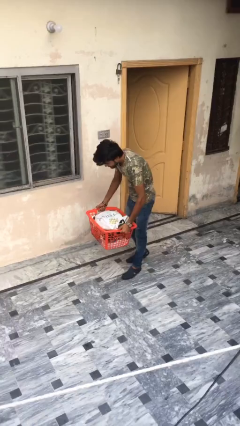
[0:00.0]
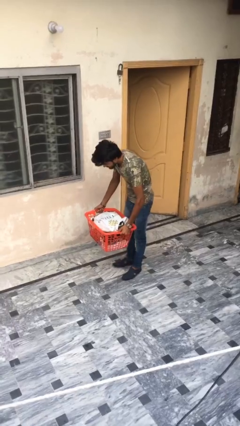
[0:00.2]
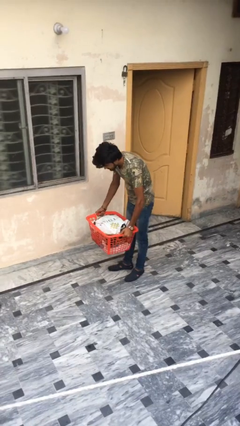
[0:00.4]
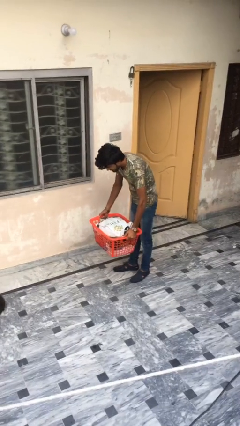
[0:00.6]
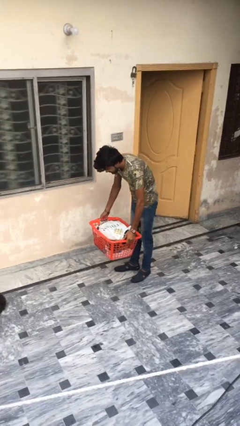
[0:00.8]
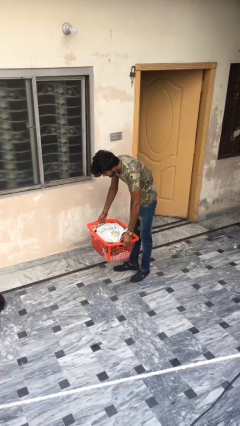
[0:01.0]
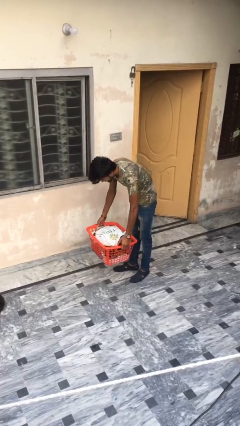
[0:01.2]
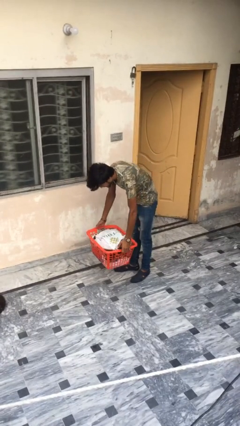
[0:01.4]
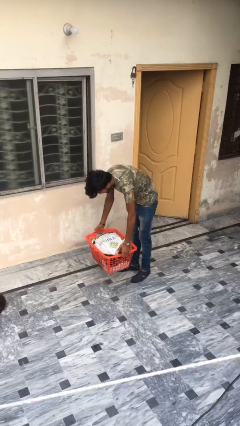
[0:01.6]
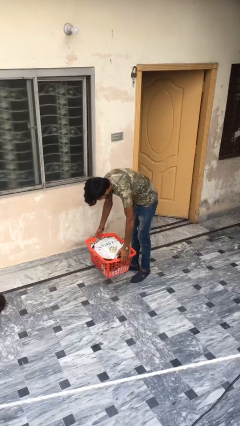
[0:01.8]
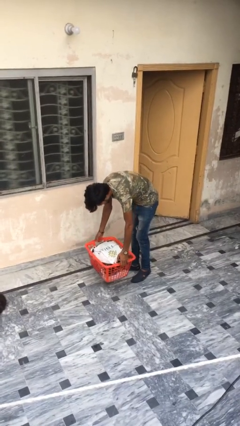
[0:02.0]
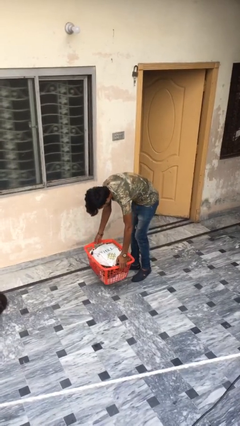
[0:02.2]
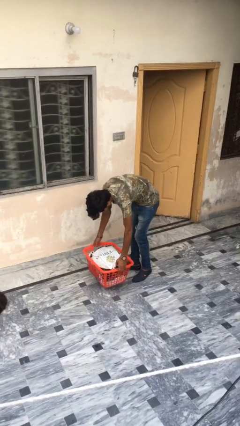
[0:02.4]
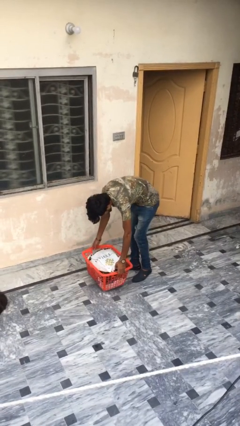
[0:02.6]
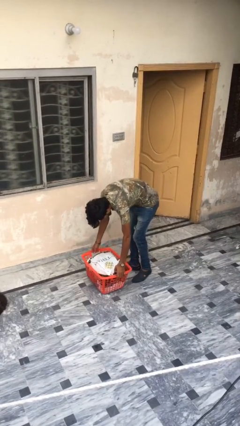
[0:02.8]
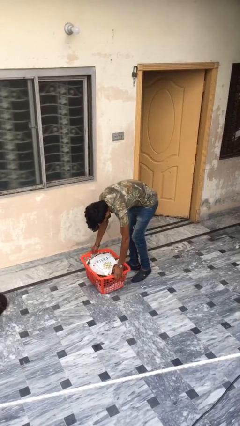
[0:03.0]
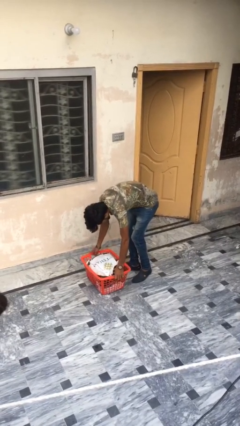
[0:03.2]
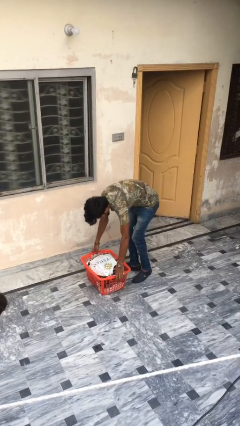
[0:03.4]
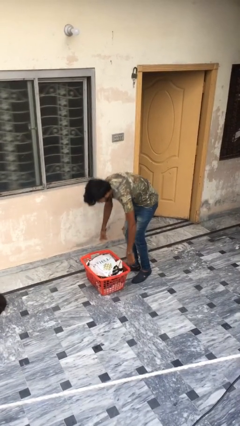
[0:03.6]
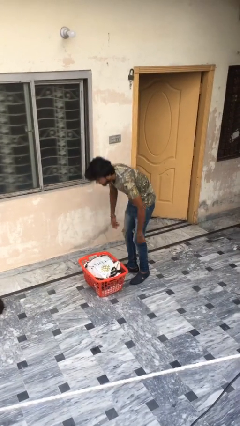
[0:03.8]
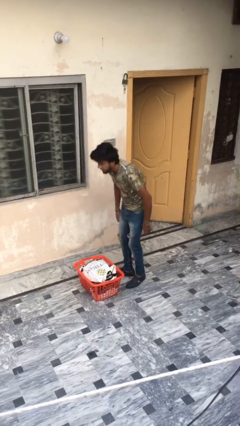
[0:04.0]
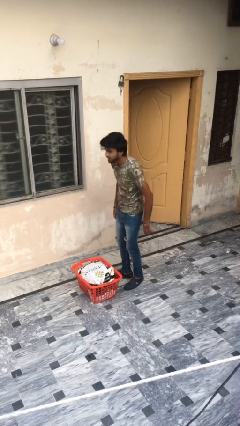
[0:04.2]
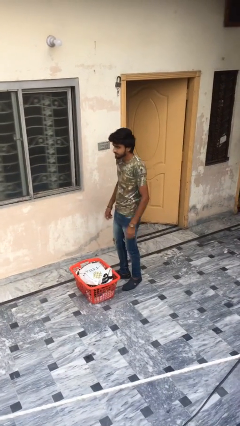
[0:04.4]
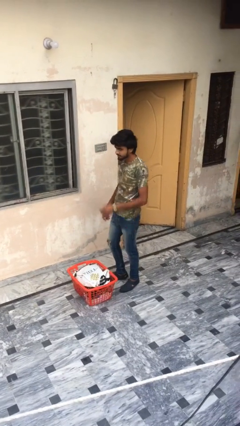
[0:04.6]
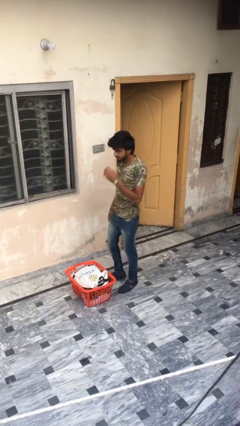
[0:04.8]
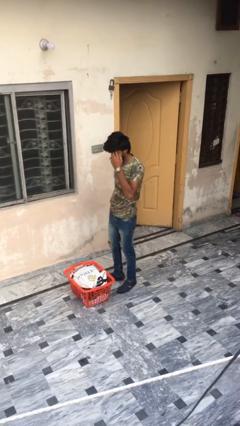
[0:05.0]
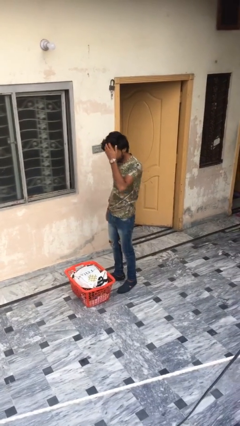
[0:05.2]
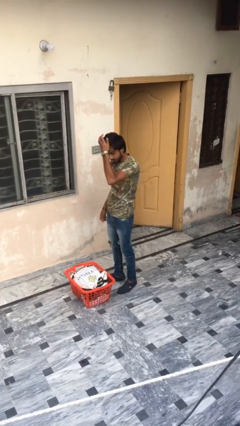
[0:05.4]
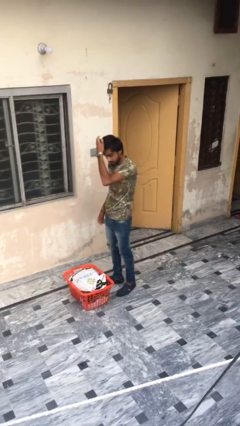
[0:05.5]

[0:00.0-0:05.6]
person puts down object on floor

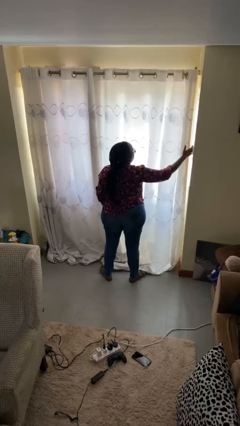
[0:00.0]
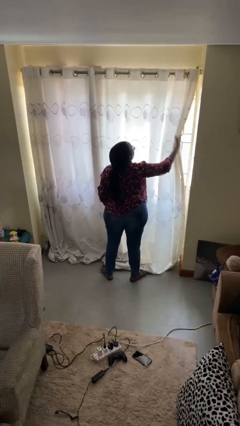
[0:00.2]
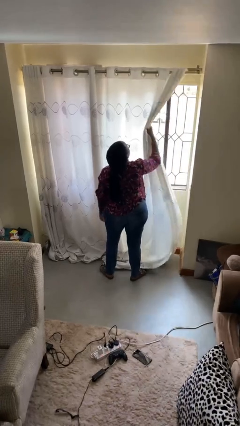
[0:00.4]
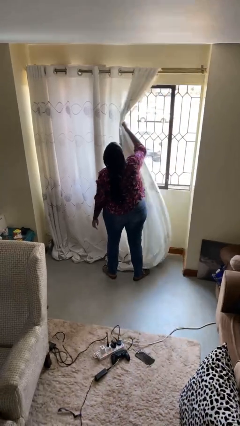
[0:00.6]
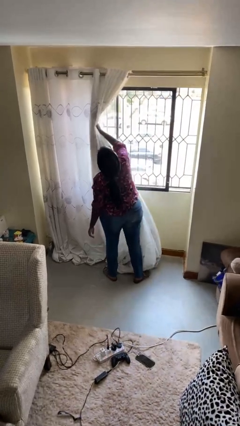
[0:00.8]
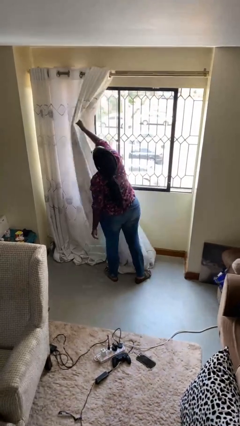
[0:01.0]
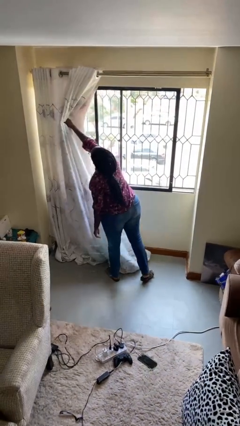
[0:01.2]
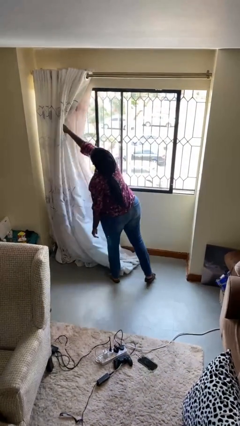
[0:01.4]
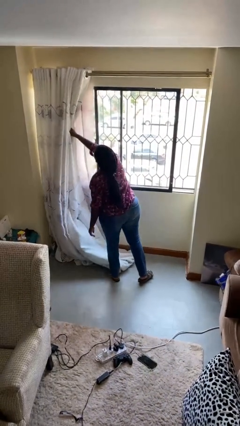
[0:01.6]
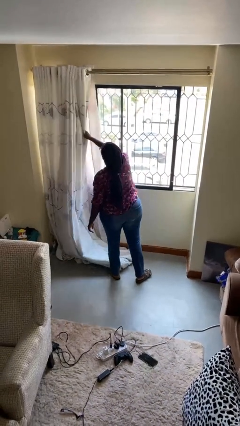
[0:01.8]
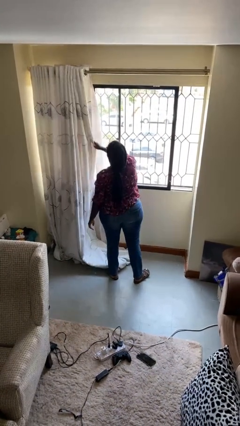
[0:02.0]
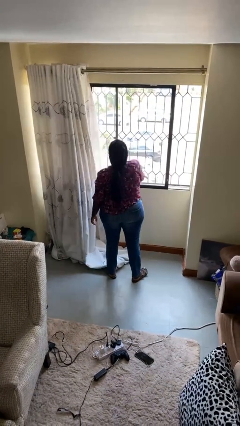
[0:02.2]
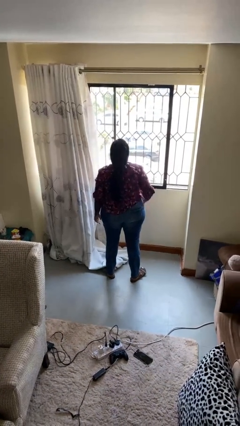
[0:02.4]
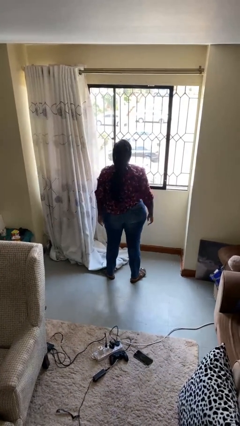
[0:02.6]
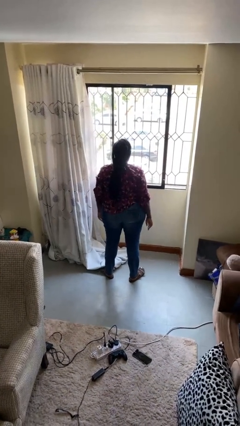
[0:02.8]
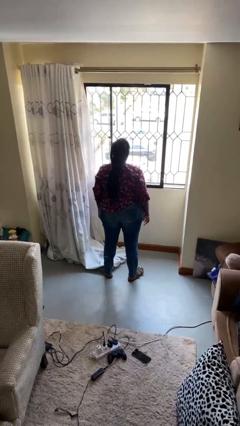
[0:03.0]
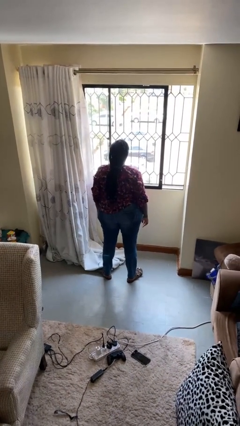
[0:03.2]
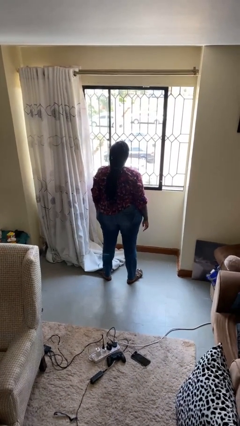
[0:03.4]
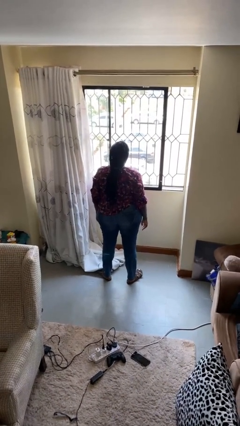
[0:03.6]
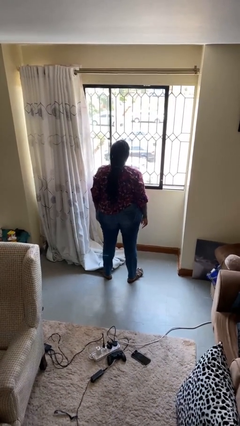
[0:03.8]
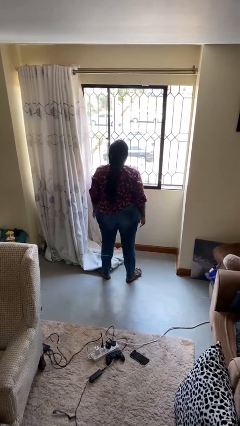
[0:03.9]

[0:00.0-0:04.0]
person opens curtains

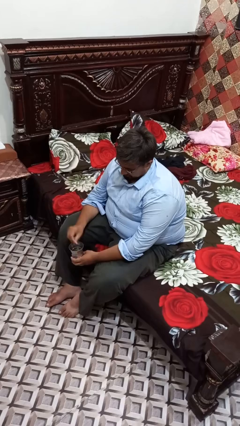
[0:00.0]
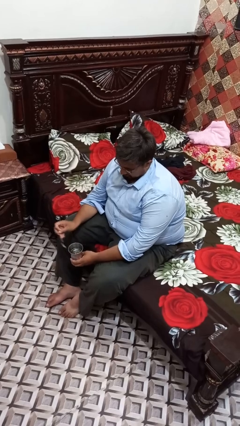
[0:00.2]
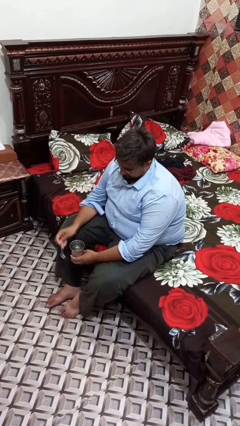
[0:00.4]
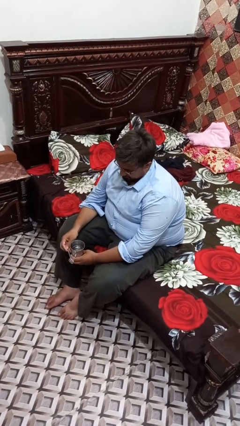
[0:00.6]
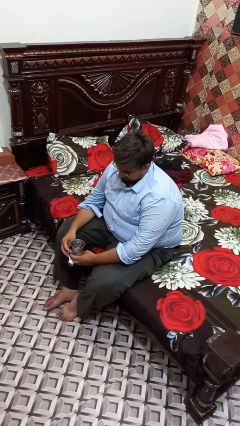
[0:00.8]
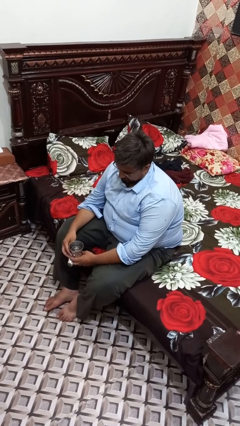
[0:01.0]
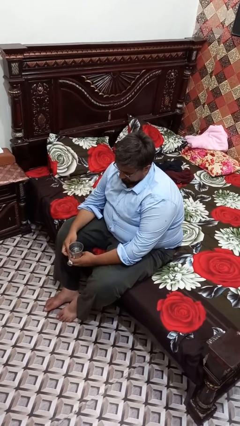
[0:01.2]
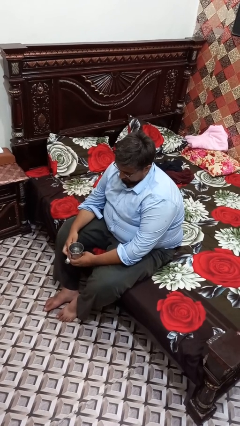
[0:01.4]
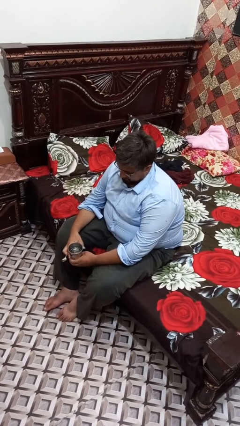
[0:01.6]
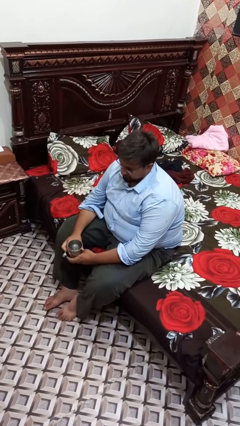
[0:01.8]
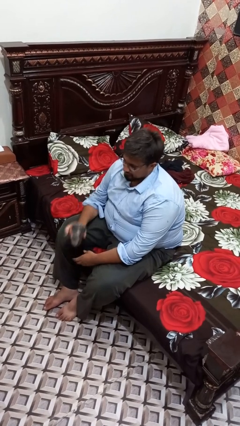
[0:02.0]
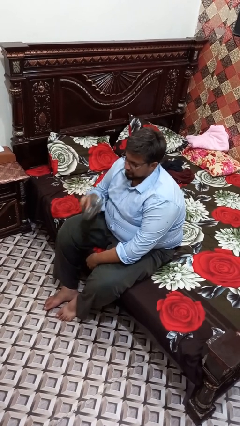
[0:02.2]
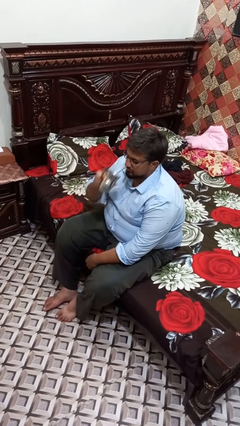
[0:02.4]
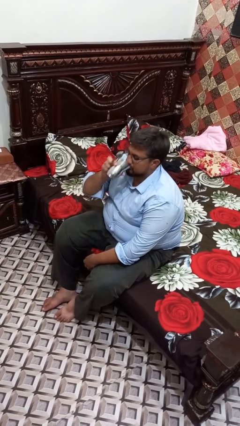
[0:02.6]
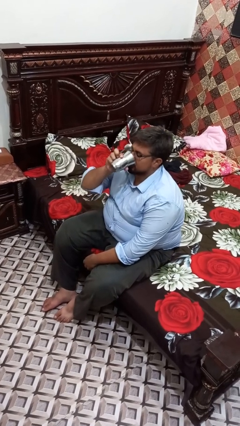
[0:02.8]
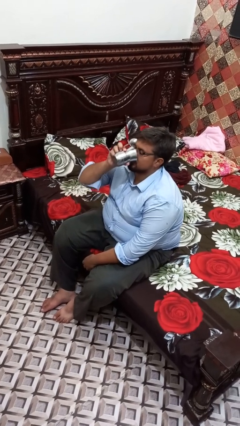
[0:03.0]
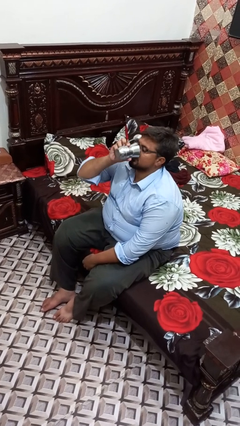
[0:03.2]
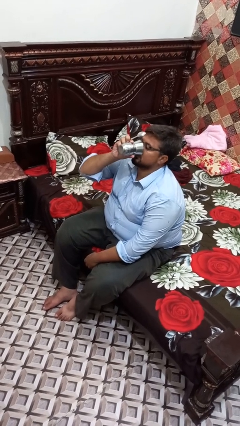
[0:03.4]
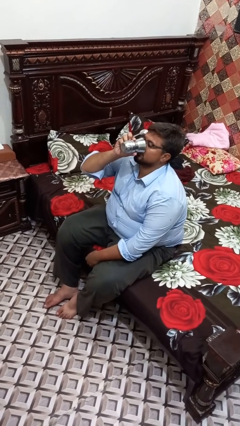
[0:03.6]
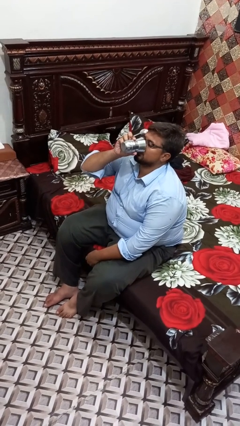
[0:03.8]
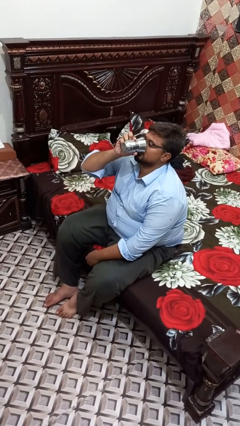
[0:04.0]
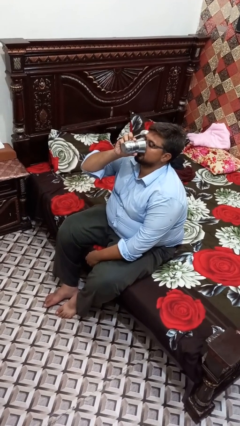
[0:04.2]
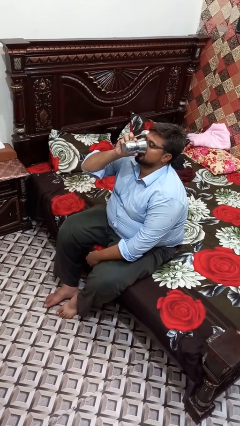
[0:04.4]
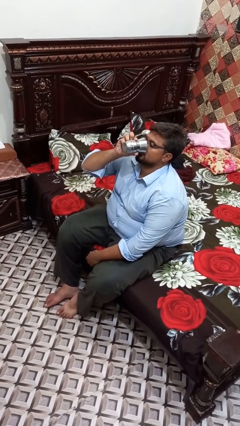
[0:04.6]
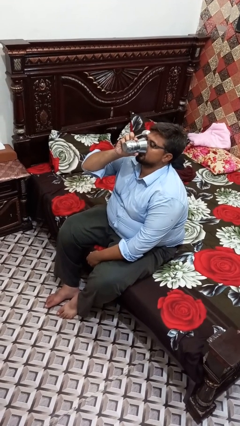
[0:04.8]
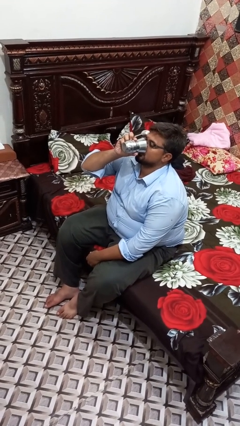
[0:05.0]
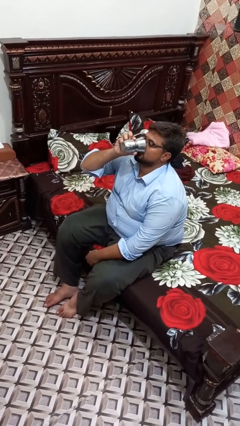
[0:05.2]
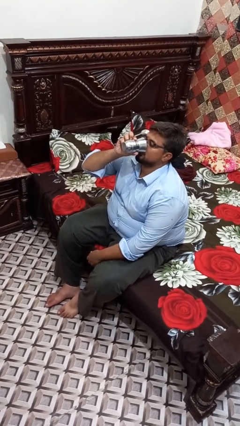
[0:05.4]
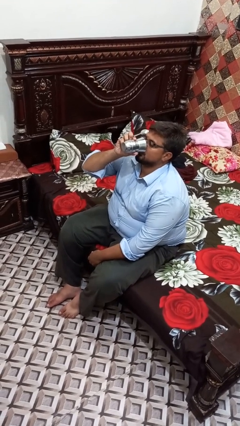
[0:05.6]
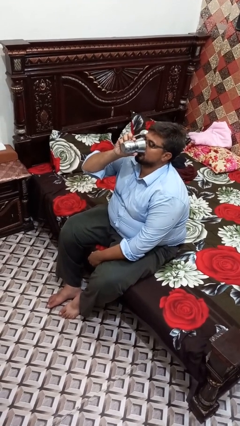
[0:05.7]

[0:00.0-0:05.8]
person drinks from mug

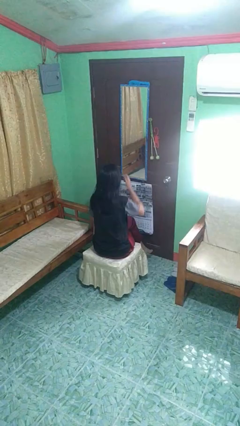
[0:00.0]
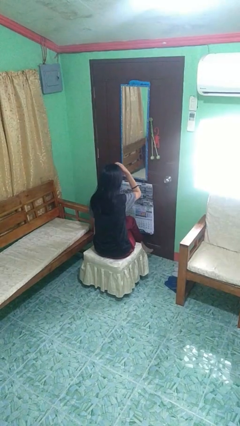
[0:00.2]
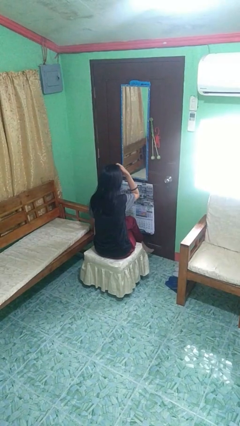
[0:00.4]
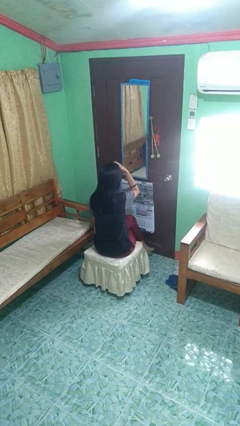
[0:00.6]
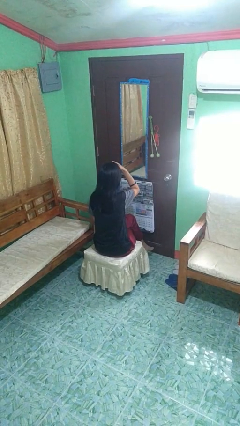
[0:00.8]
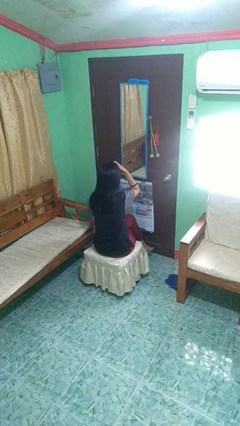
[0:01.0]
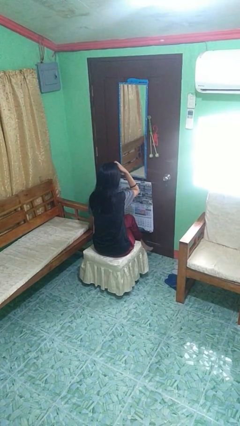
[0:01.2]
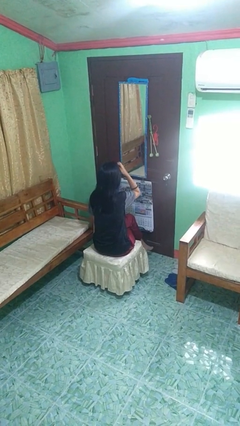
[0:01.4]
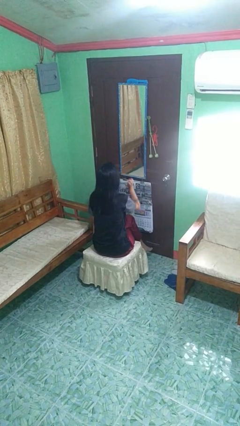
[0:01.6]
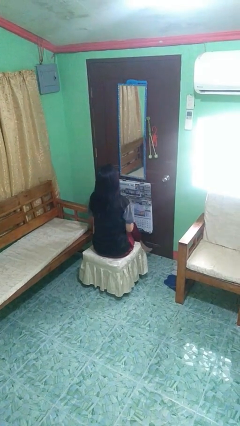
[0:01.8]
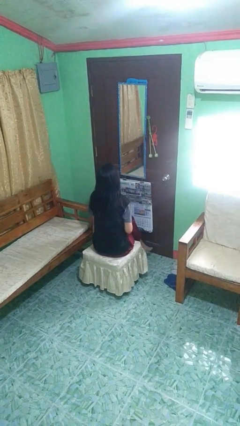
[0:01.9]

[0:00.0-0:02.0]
person scratches face

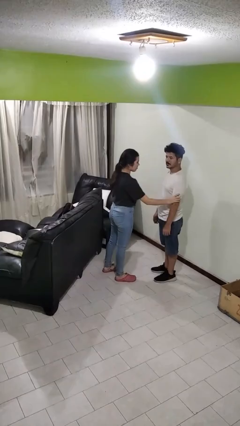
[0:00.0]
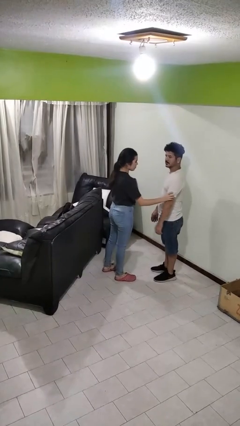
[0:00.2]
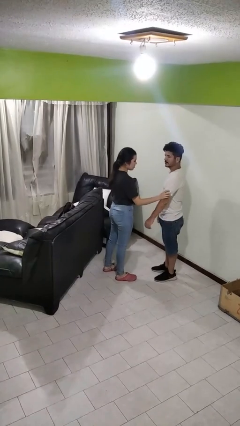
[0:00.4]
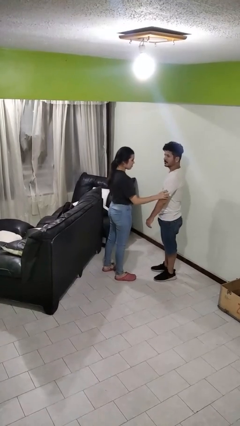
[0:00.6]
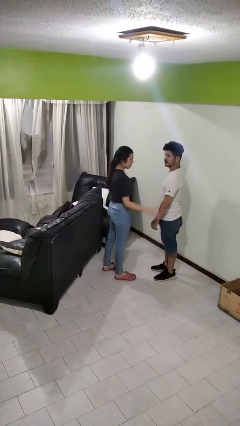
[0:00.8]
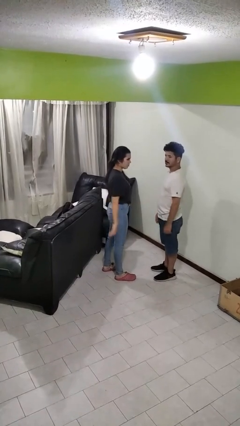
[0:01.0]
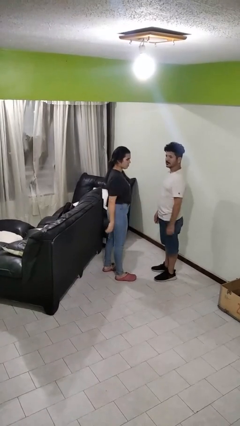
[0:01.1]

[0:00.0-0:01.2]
person grabs person by bicep
